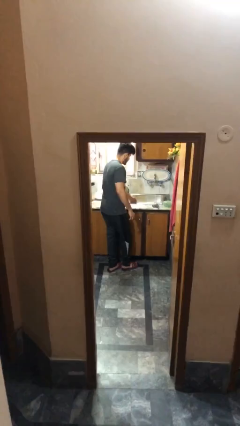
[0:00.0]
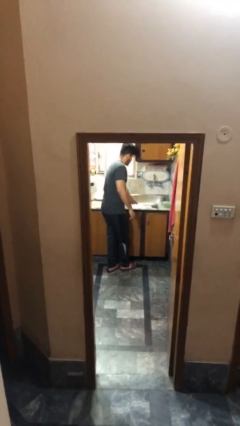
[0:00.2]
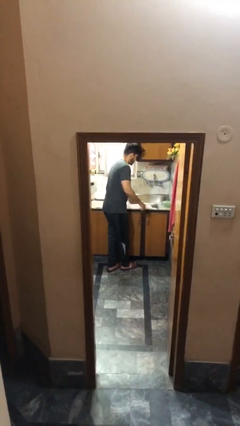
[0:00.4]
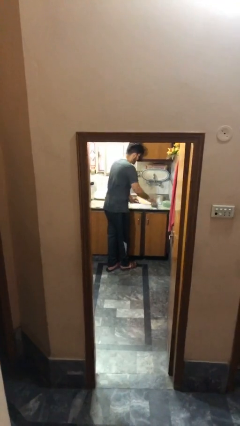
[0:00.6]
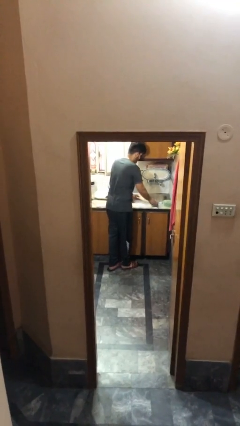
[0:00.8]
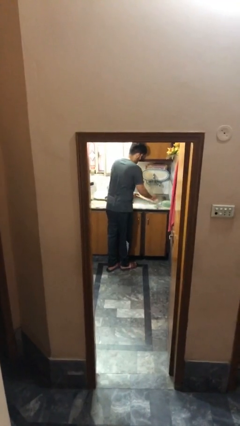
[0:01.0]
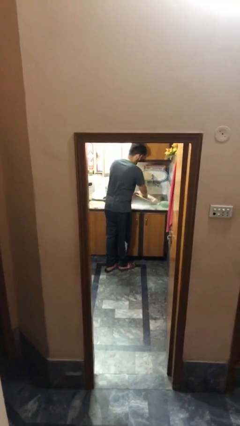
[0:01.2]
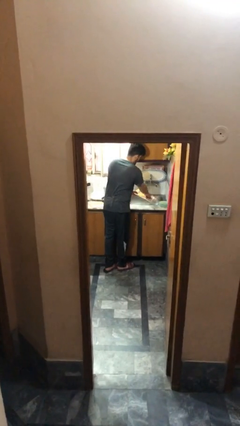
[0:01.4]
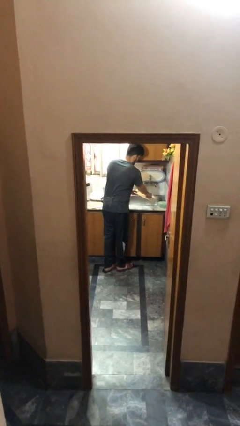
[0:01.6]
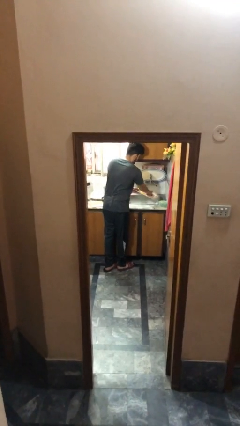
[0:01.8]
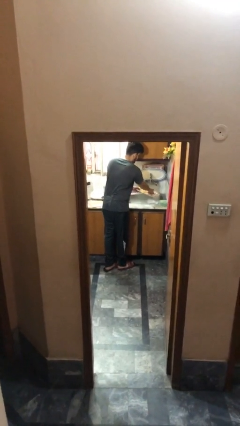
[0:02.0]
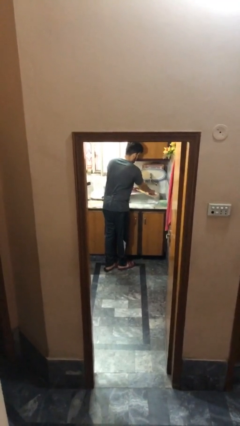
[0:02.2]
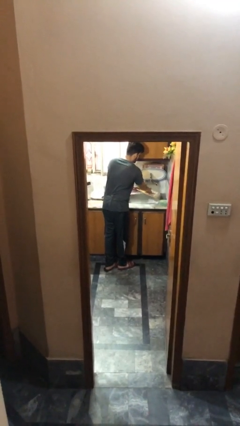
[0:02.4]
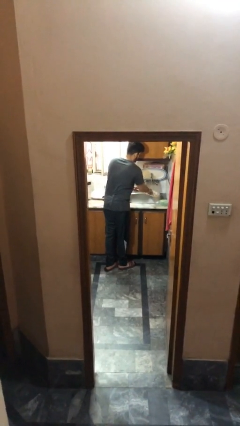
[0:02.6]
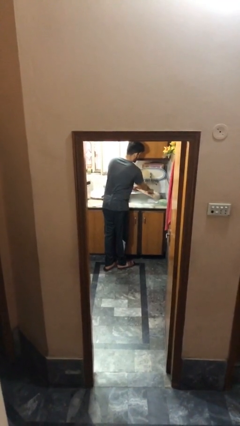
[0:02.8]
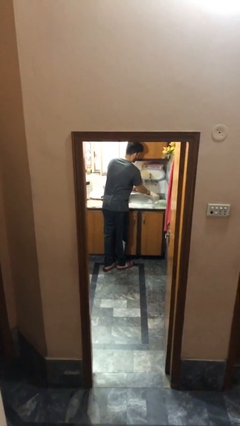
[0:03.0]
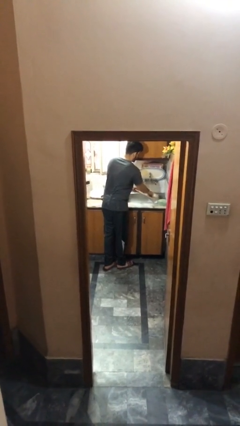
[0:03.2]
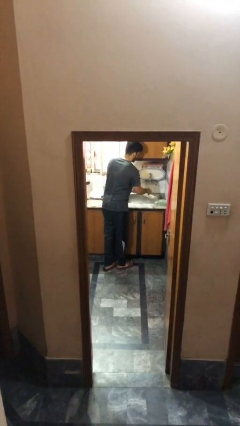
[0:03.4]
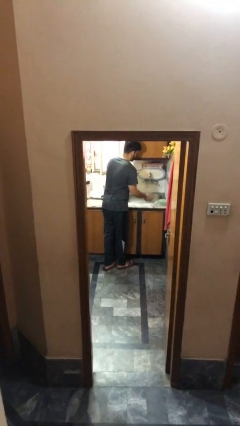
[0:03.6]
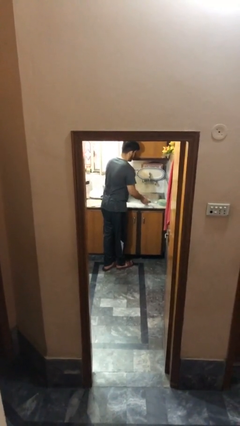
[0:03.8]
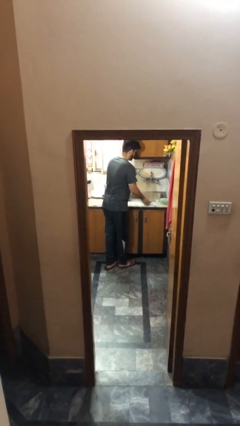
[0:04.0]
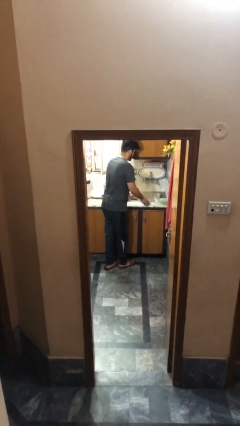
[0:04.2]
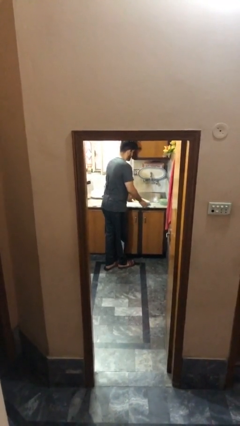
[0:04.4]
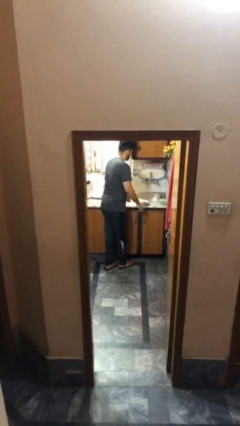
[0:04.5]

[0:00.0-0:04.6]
person washes dish

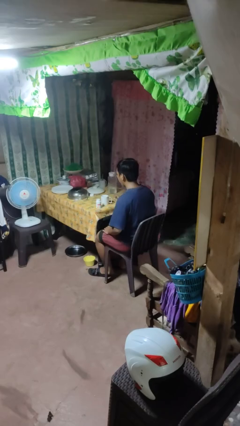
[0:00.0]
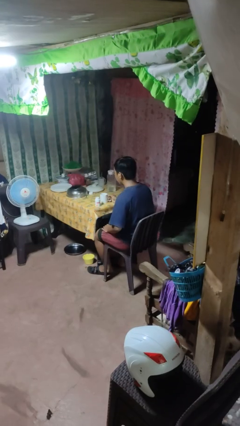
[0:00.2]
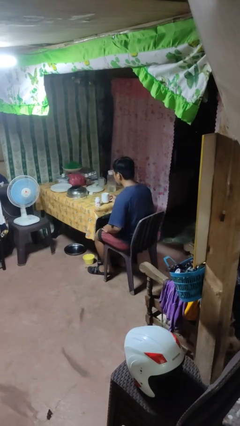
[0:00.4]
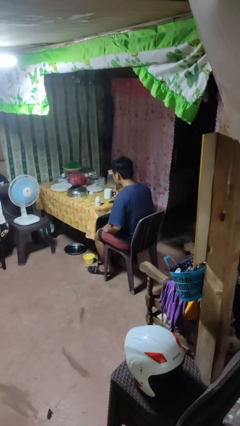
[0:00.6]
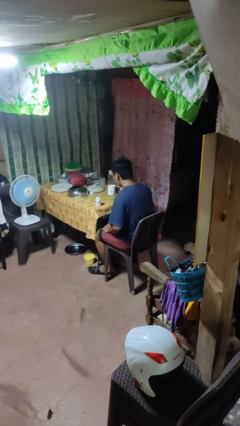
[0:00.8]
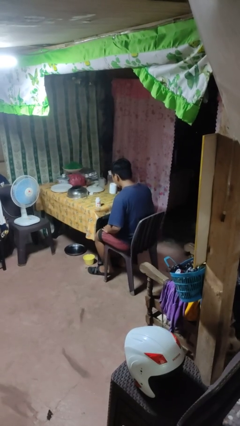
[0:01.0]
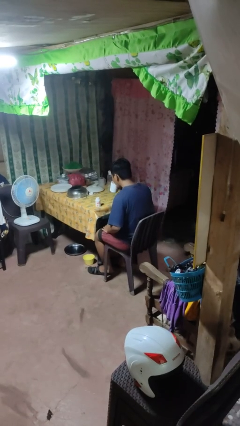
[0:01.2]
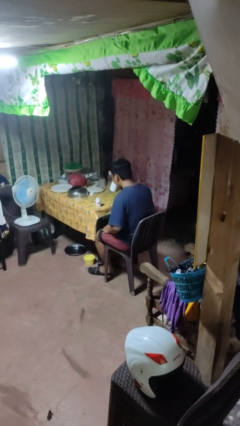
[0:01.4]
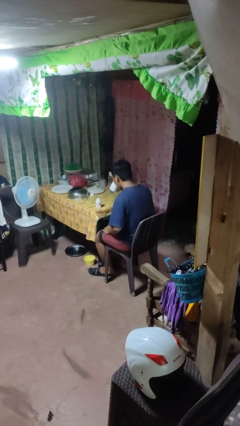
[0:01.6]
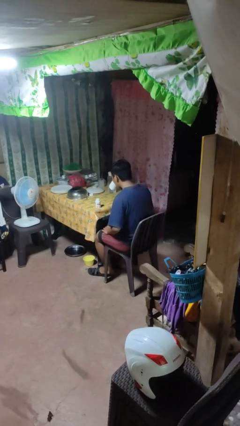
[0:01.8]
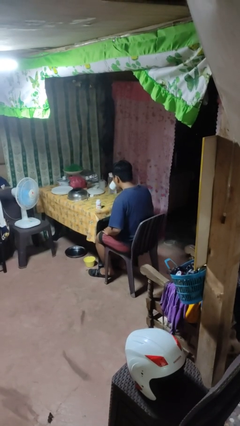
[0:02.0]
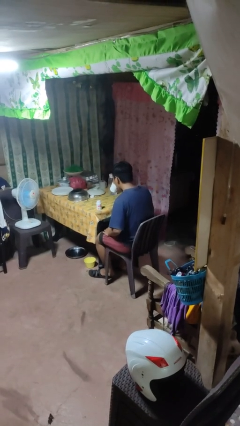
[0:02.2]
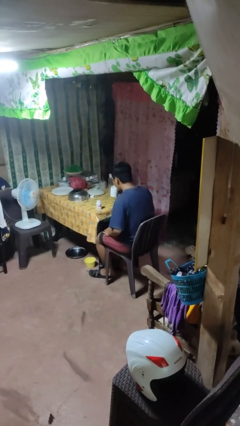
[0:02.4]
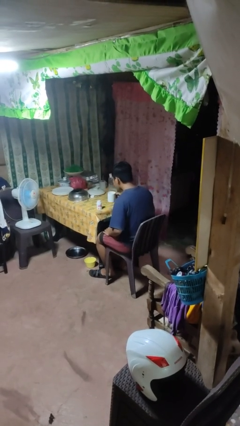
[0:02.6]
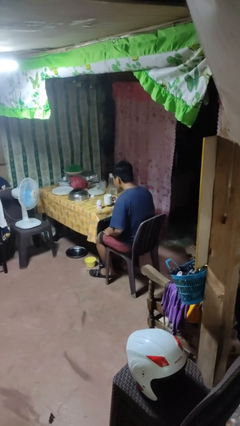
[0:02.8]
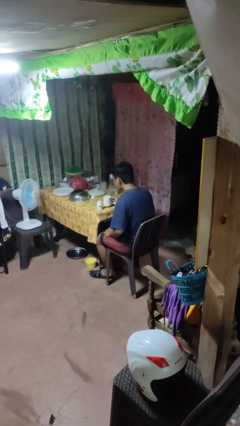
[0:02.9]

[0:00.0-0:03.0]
person drinks from cup

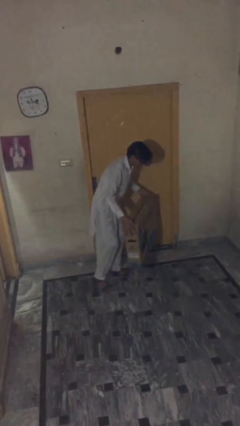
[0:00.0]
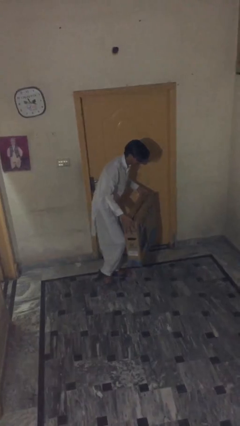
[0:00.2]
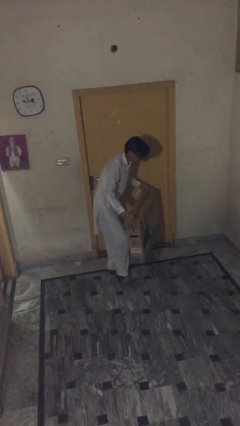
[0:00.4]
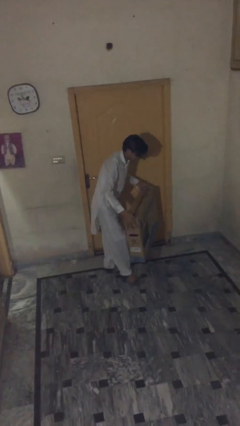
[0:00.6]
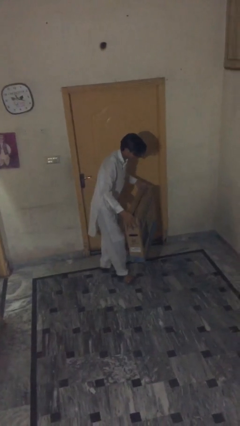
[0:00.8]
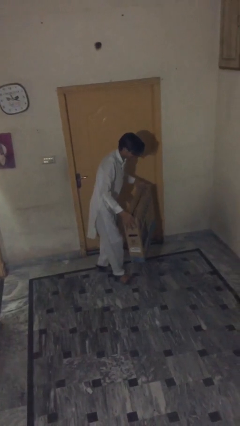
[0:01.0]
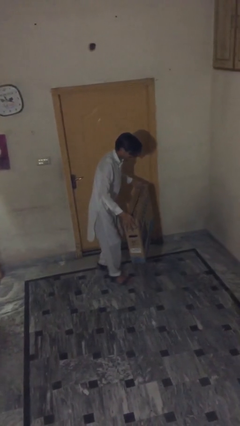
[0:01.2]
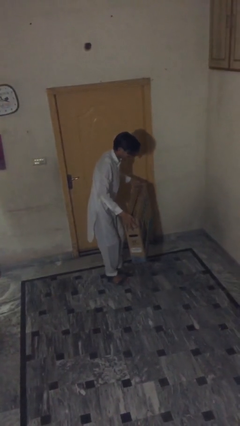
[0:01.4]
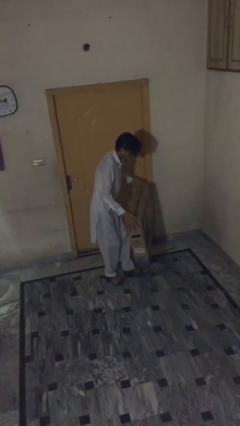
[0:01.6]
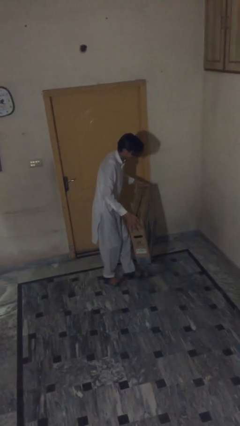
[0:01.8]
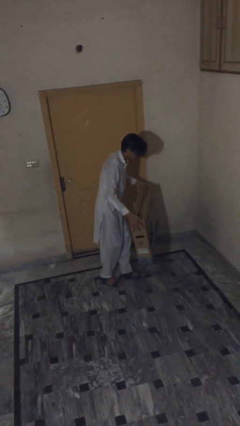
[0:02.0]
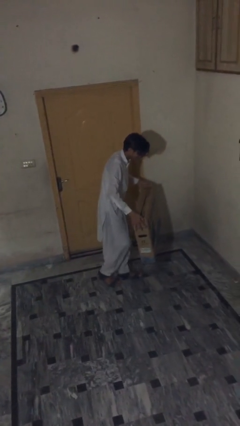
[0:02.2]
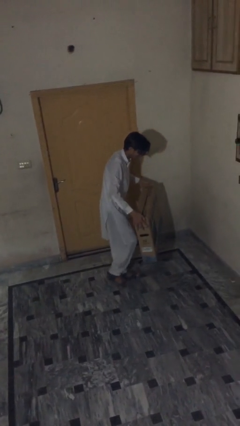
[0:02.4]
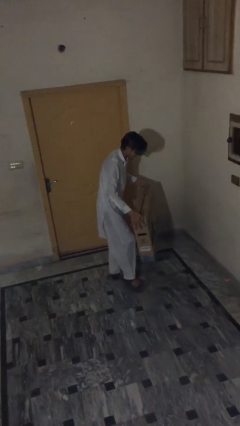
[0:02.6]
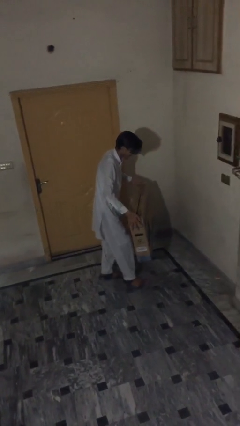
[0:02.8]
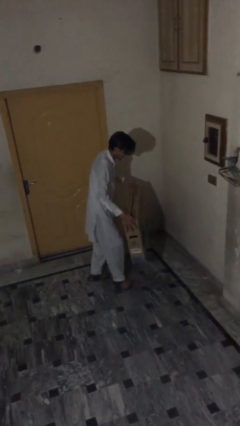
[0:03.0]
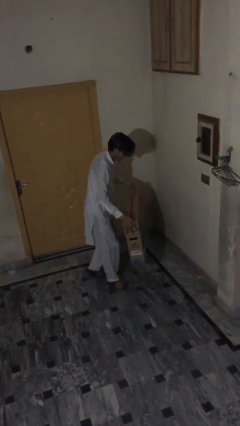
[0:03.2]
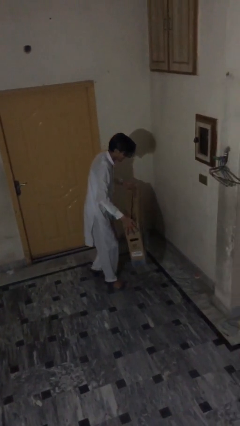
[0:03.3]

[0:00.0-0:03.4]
person carries heavy object

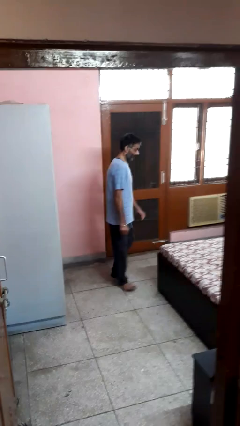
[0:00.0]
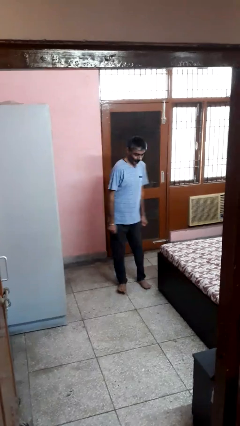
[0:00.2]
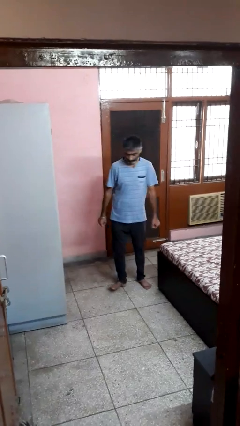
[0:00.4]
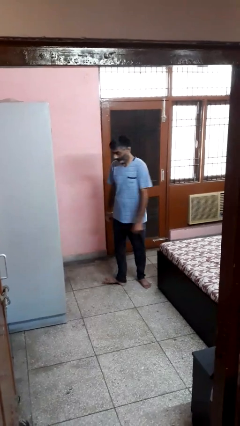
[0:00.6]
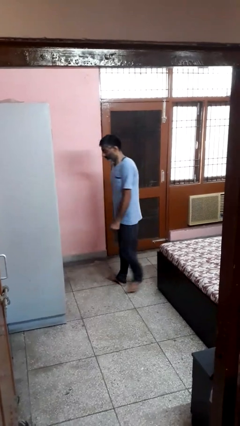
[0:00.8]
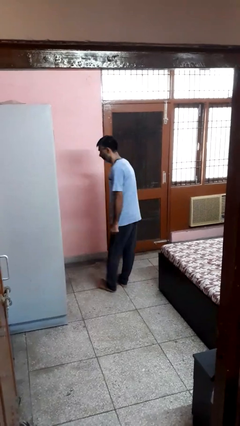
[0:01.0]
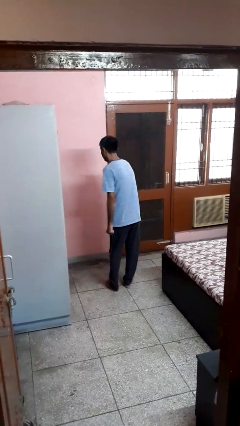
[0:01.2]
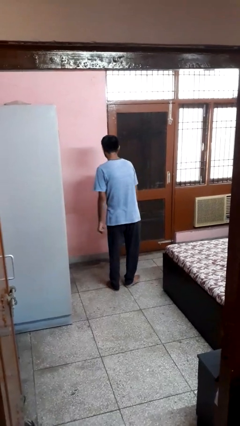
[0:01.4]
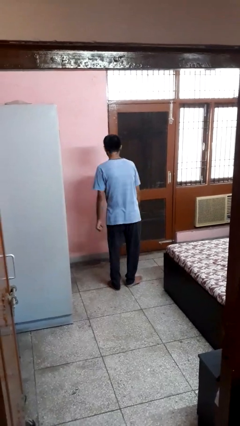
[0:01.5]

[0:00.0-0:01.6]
person twirls

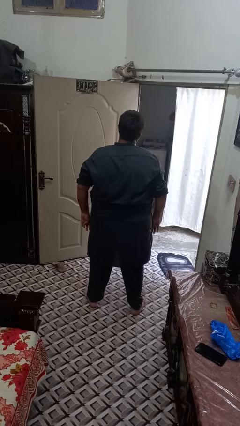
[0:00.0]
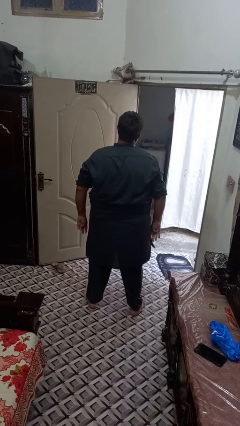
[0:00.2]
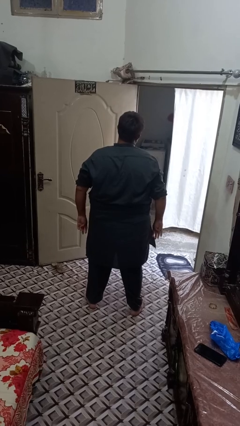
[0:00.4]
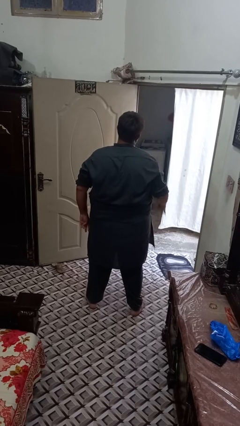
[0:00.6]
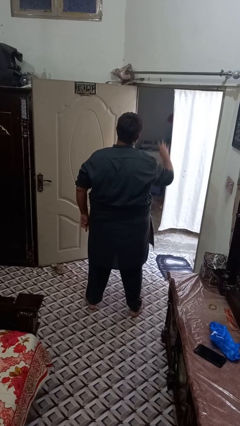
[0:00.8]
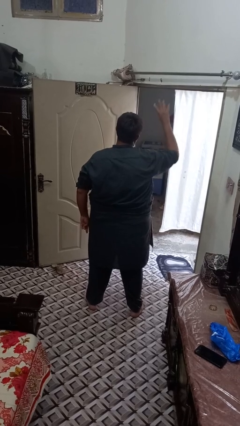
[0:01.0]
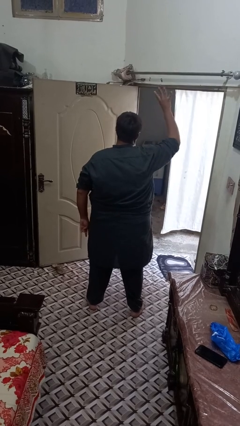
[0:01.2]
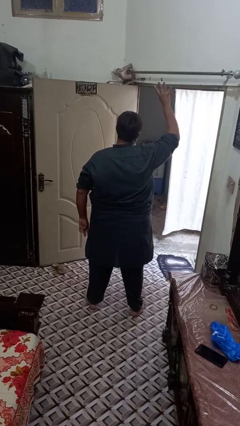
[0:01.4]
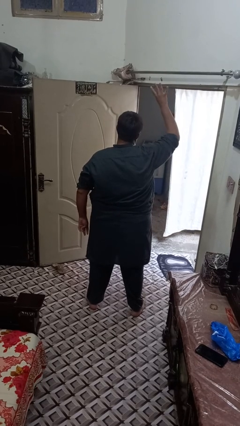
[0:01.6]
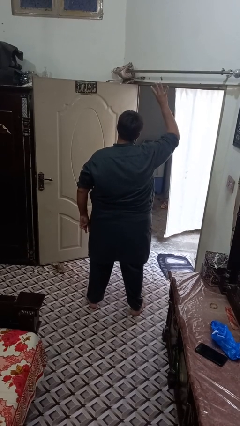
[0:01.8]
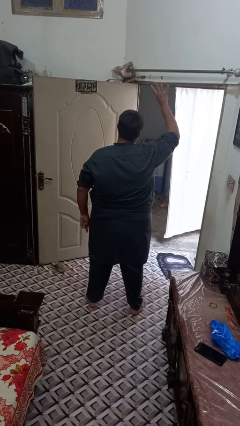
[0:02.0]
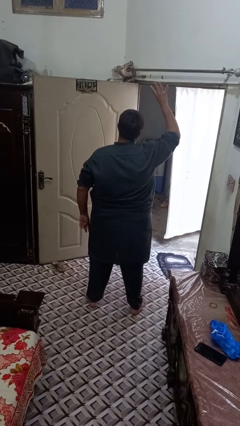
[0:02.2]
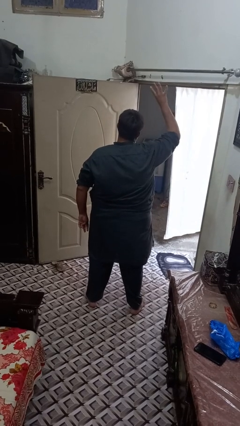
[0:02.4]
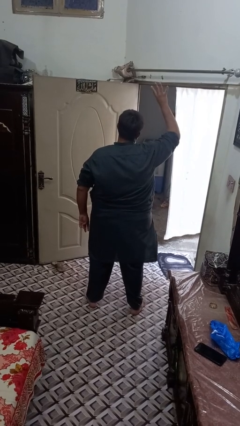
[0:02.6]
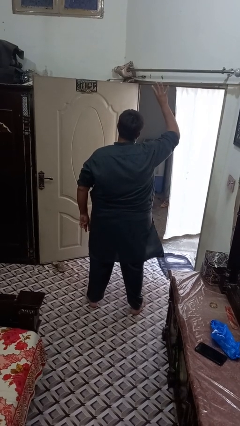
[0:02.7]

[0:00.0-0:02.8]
person gestures number four

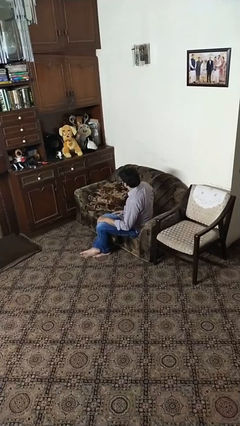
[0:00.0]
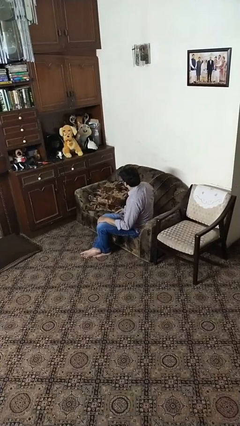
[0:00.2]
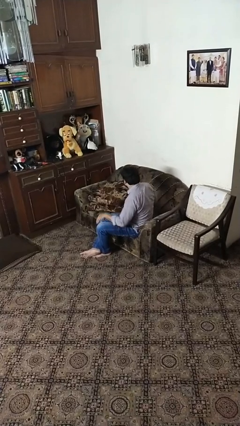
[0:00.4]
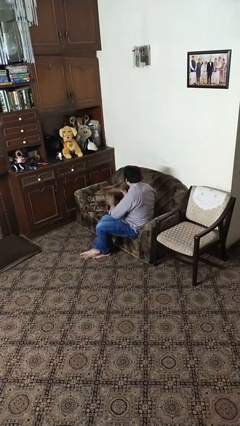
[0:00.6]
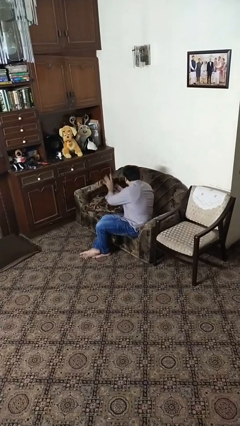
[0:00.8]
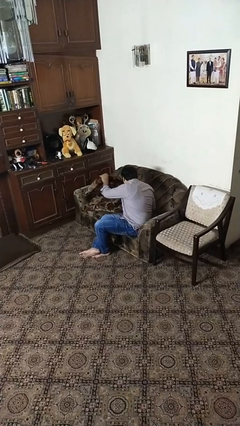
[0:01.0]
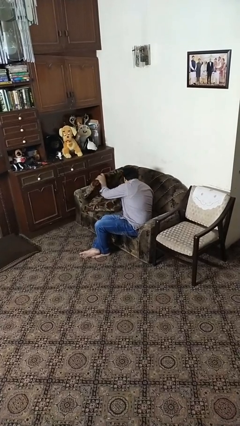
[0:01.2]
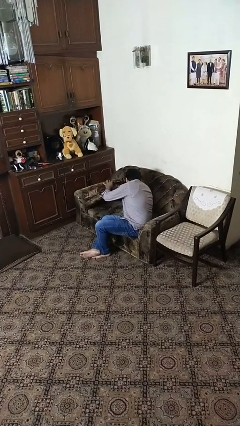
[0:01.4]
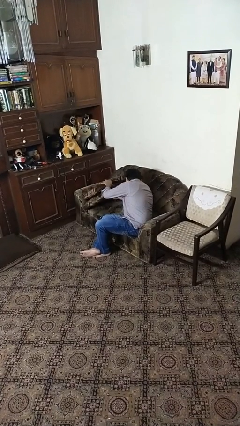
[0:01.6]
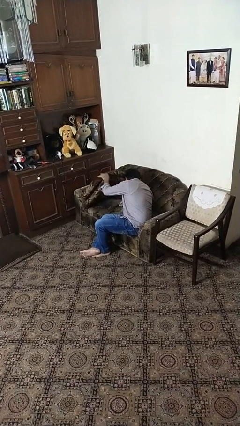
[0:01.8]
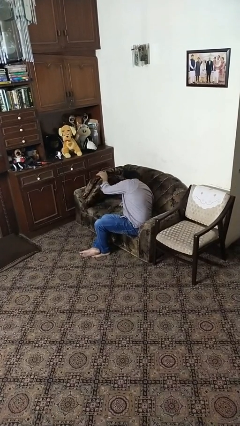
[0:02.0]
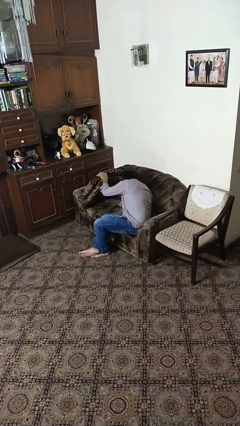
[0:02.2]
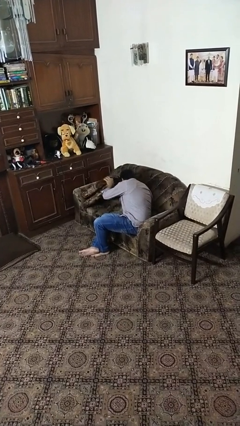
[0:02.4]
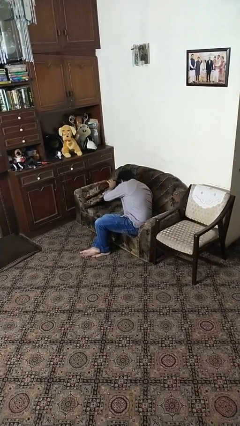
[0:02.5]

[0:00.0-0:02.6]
person searches in couch
